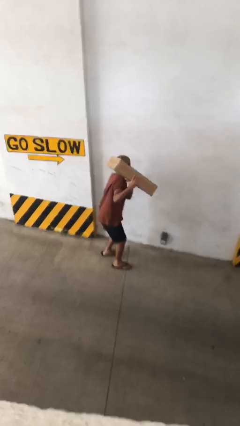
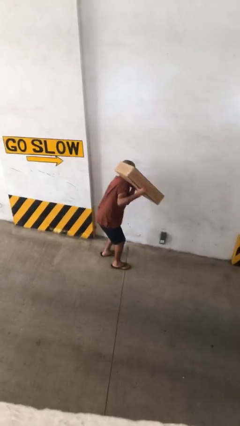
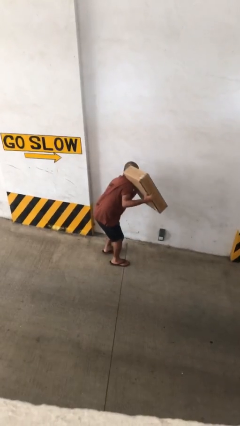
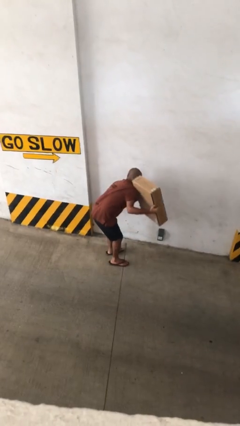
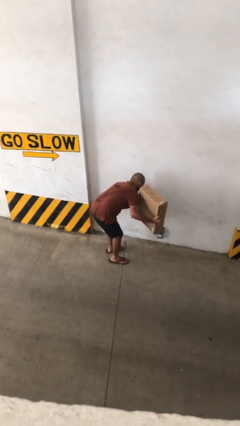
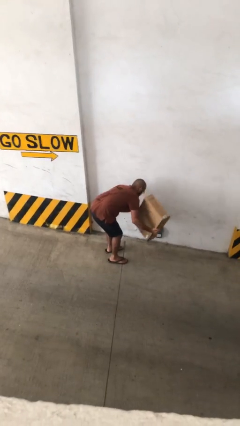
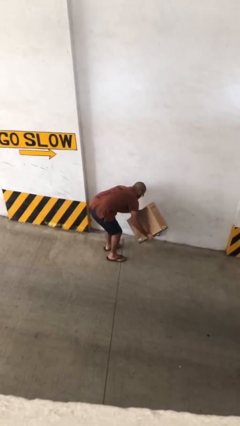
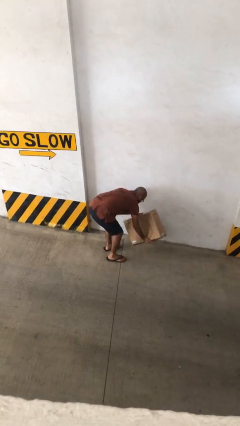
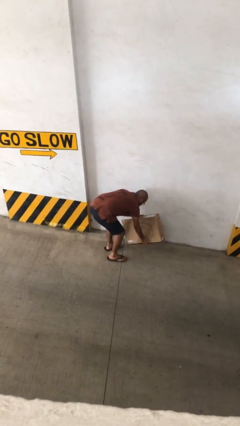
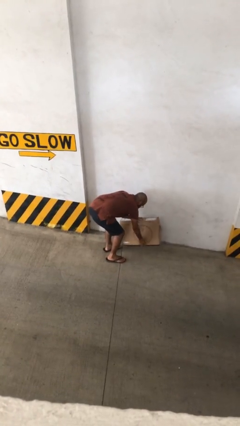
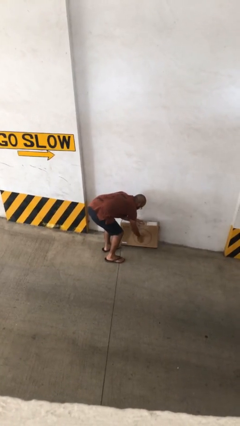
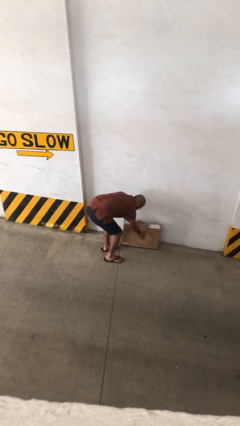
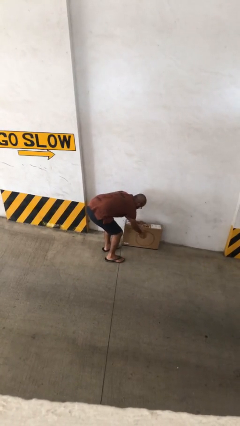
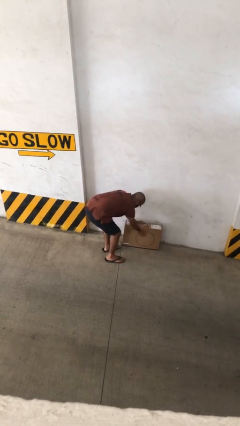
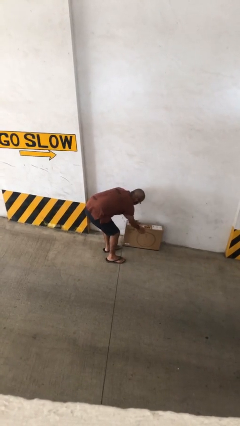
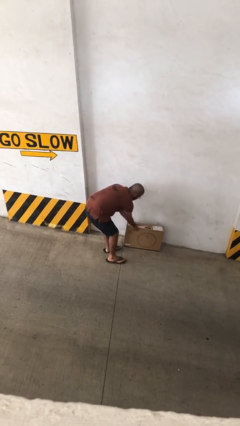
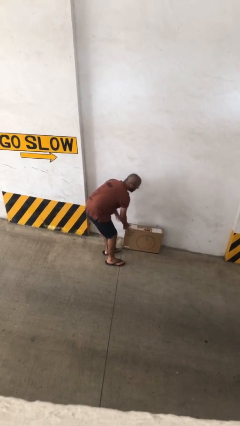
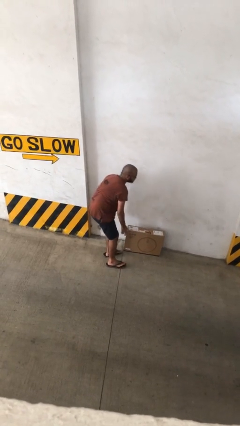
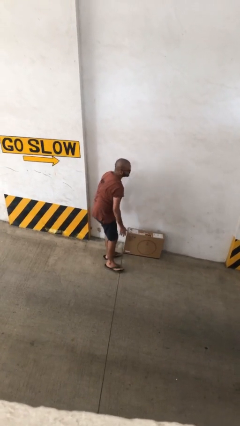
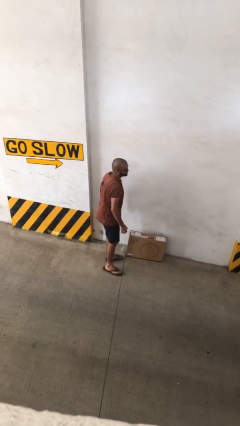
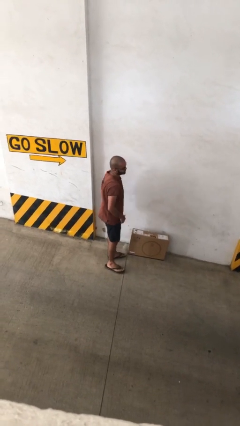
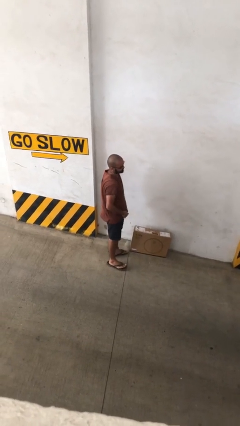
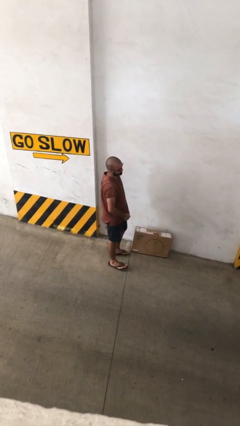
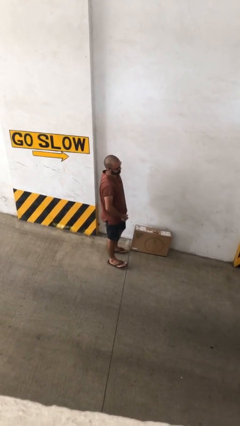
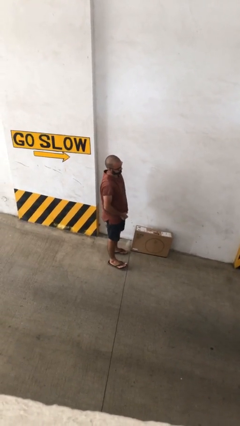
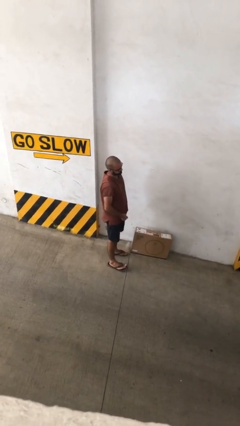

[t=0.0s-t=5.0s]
person puts down object on floor

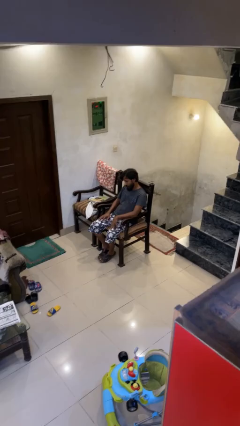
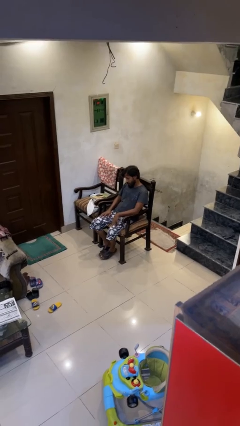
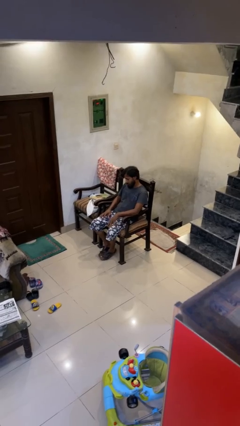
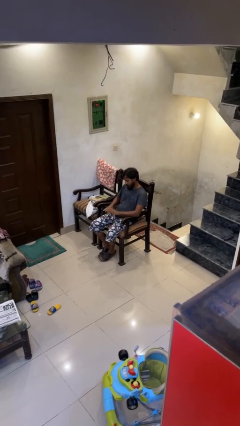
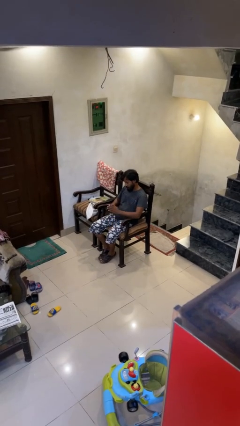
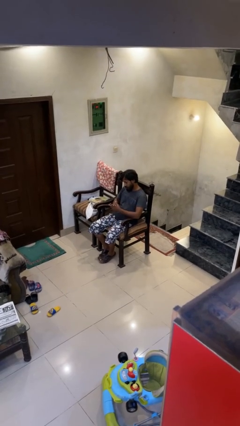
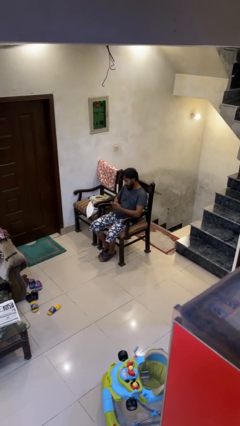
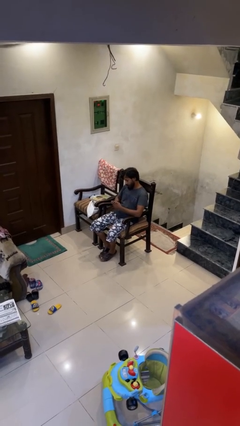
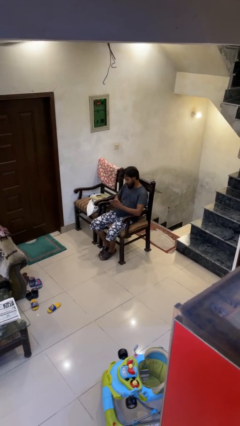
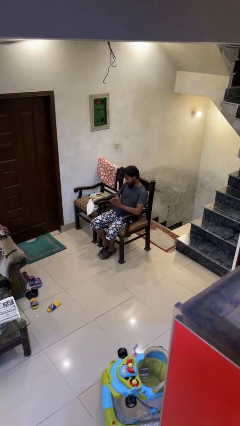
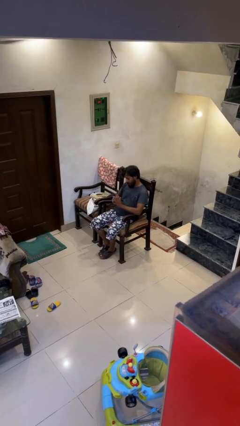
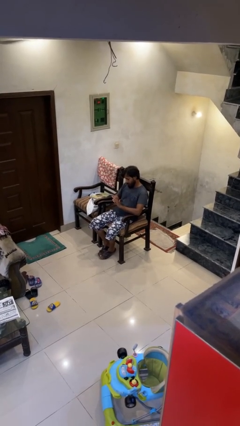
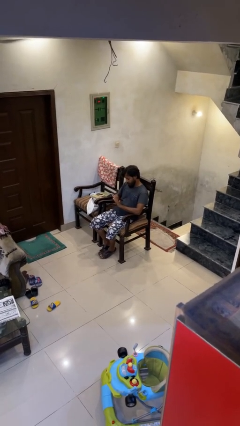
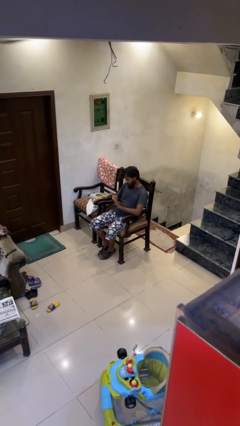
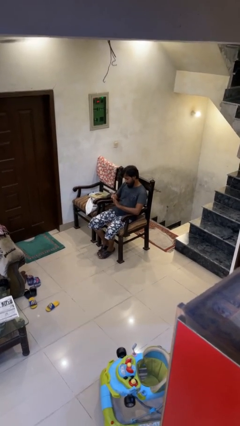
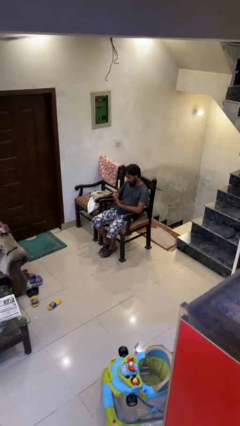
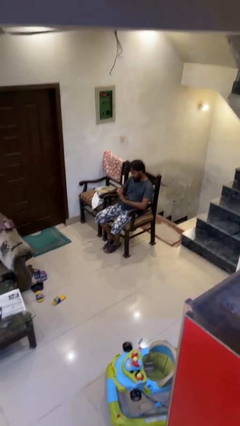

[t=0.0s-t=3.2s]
person looks at hands in lap

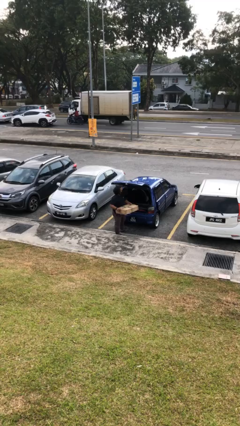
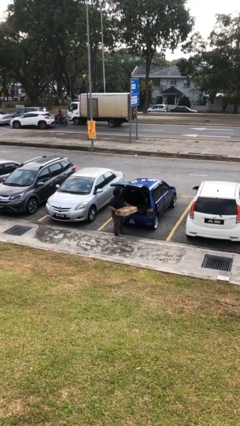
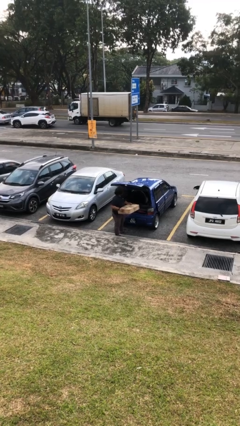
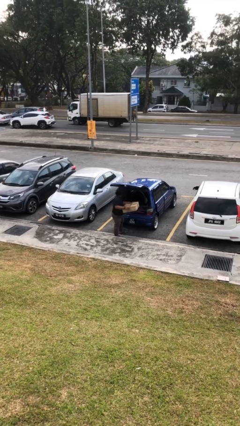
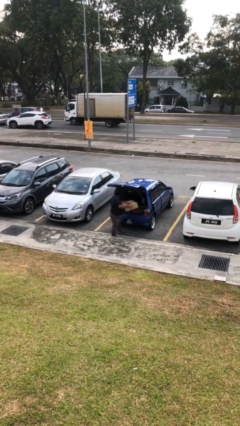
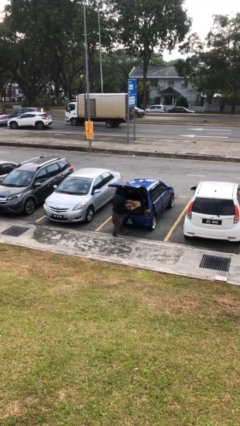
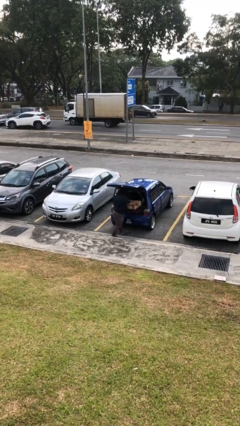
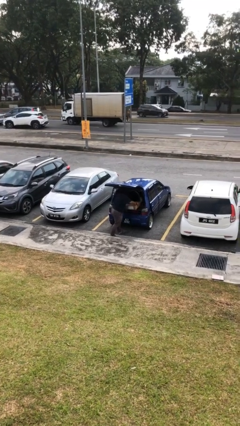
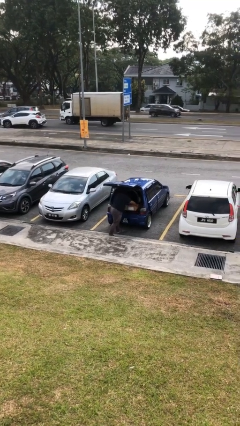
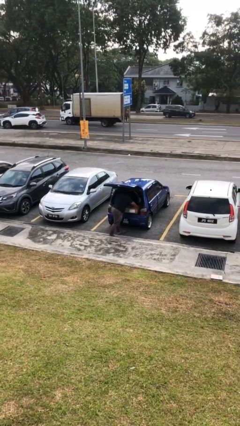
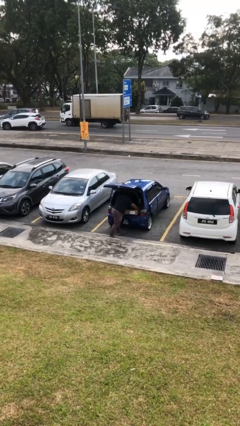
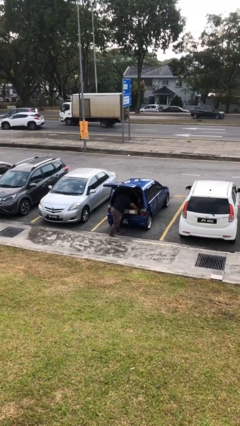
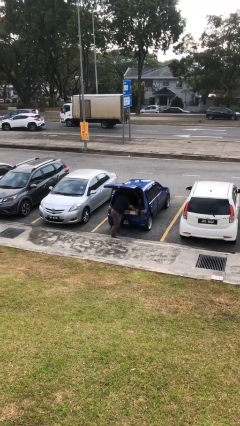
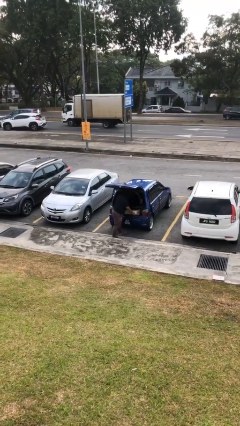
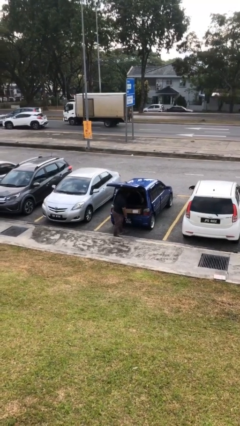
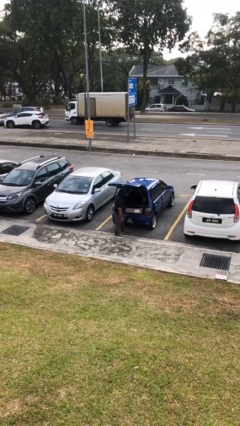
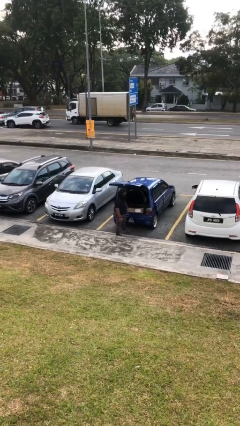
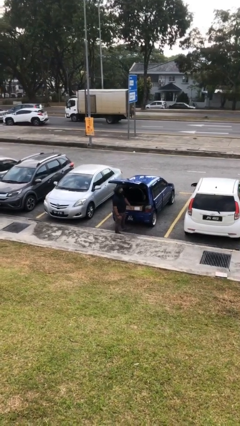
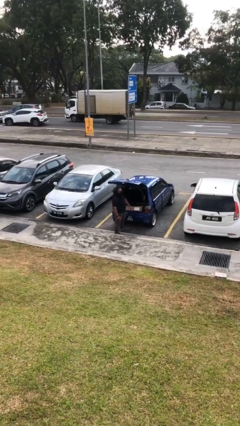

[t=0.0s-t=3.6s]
person loads car

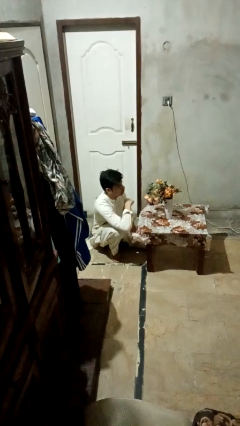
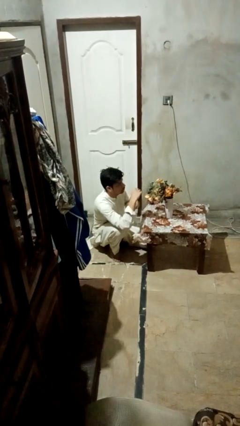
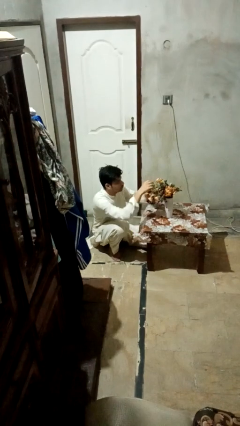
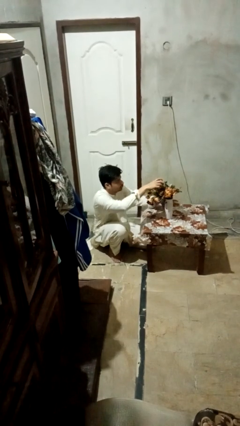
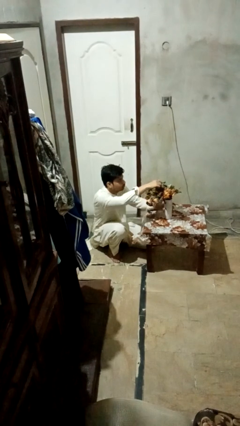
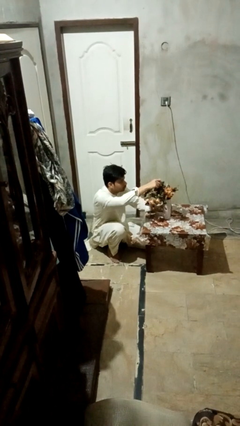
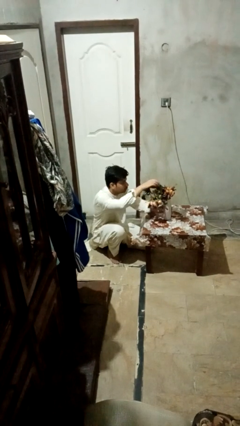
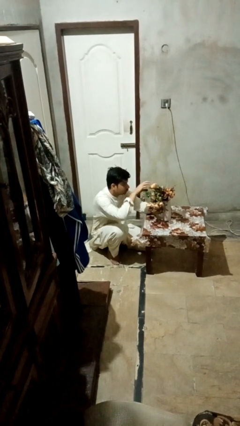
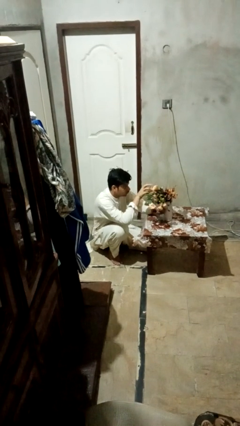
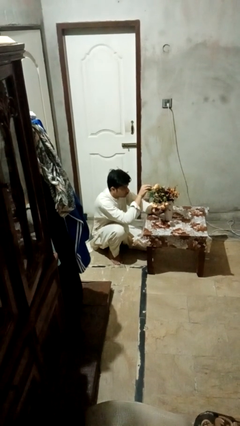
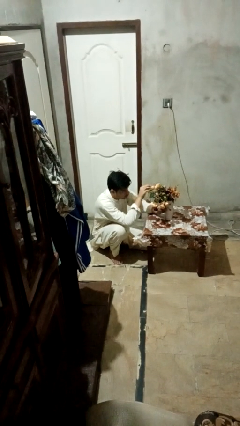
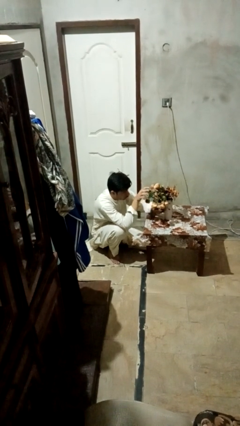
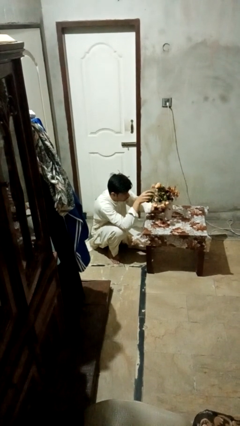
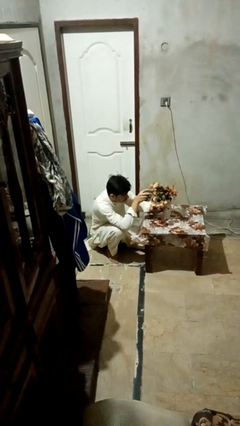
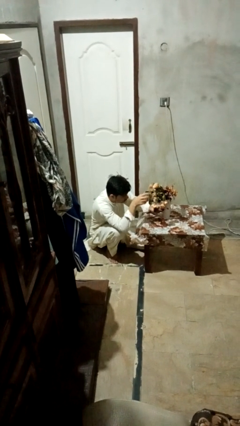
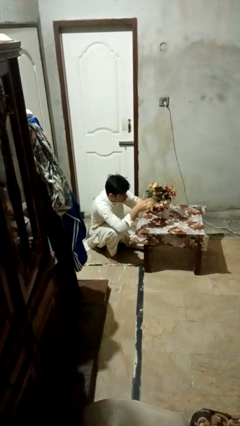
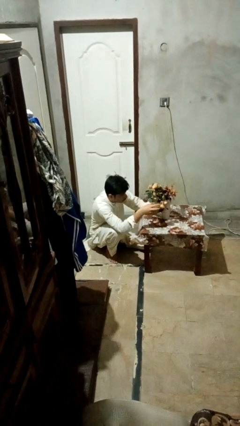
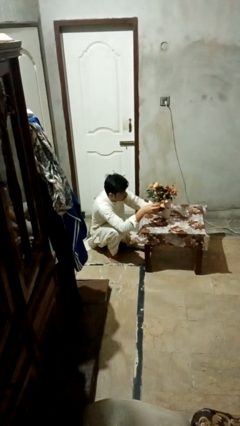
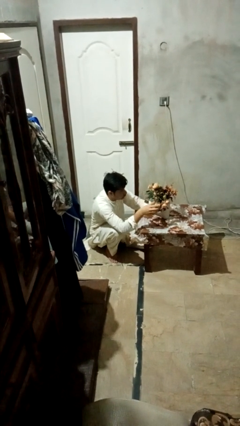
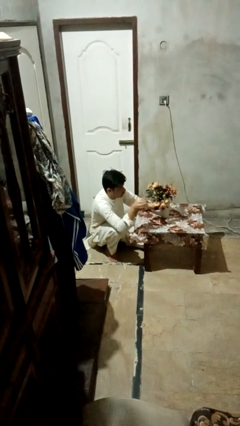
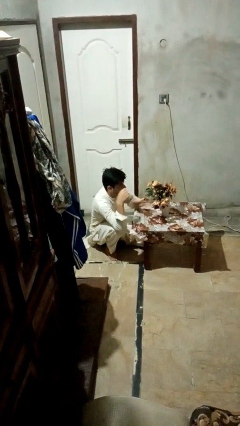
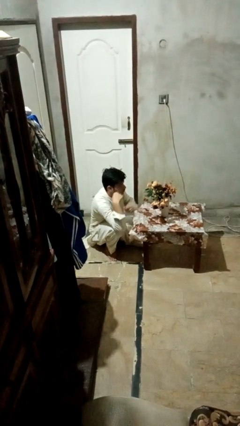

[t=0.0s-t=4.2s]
person arranges flowers in vase

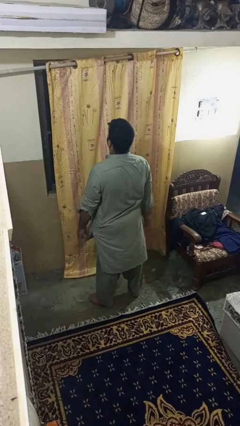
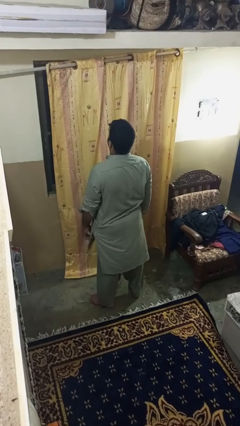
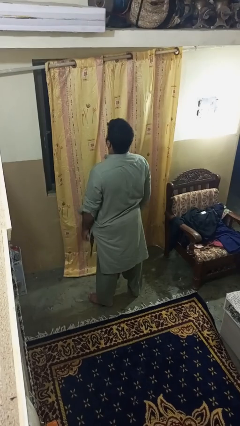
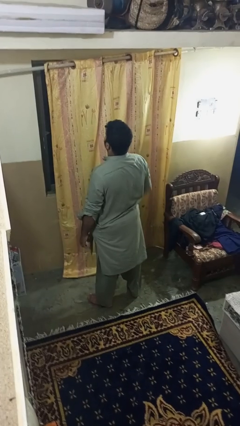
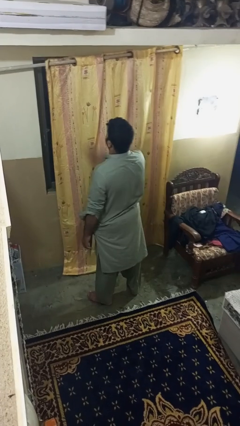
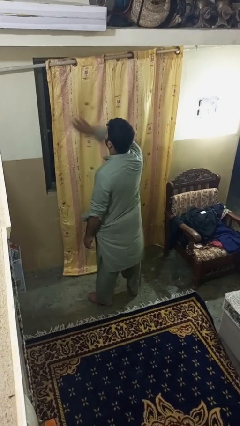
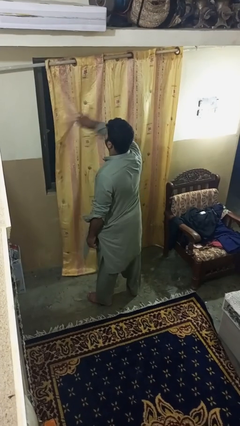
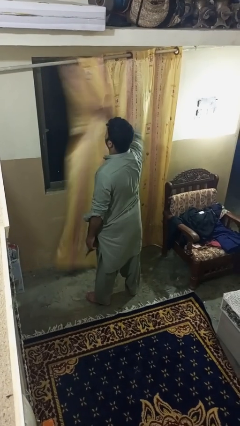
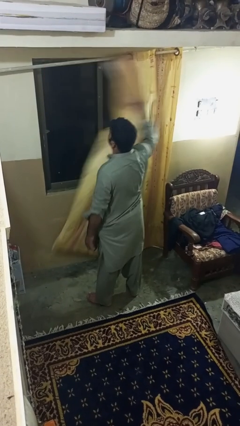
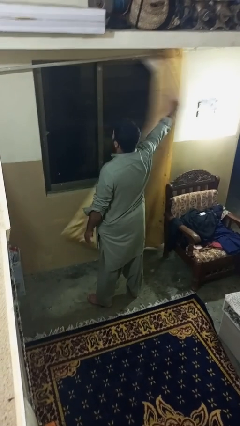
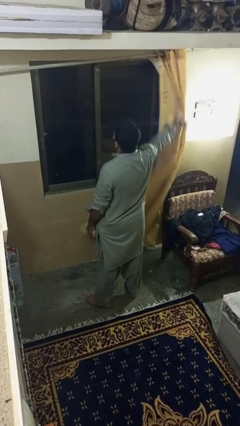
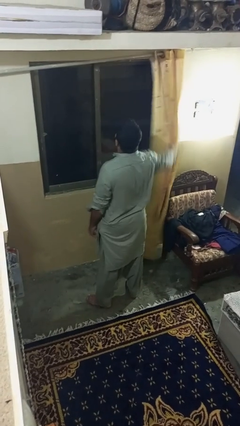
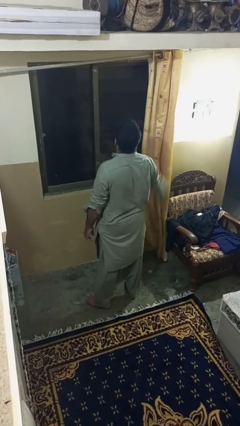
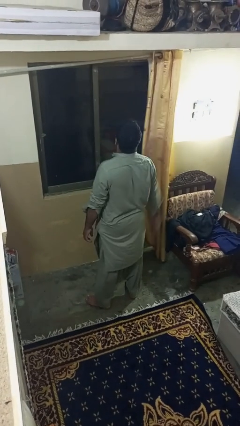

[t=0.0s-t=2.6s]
person opens curtains
